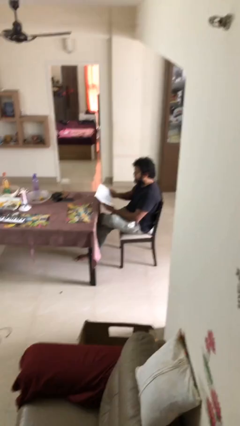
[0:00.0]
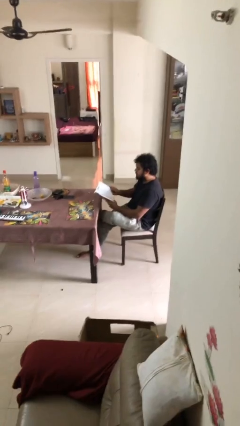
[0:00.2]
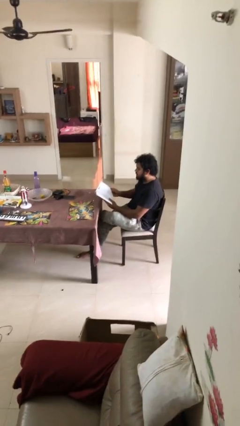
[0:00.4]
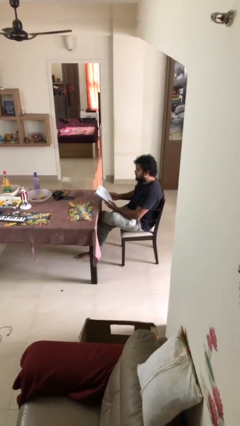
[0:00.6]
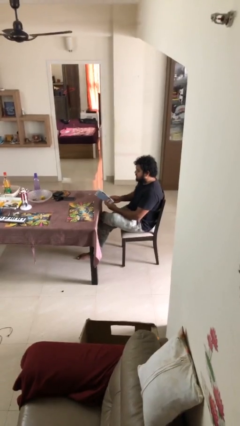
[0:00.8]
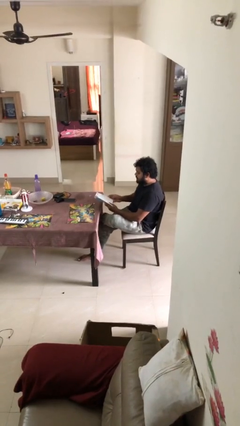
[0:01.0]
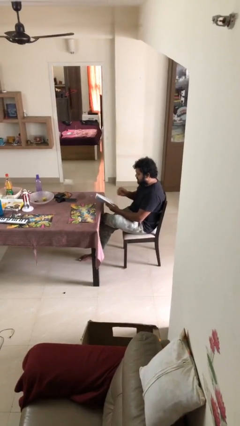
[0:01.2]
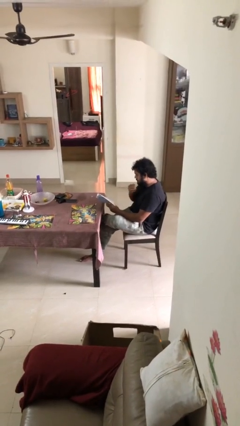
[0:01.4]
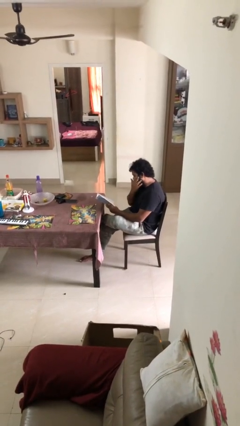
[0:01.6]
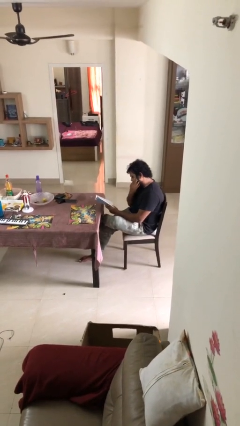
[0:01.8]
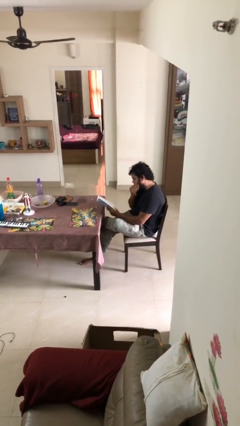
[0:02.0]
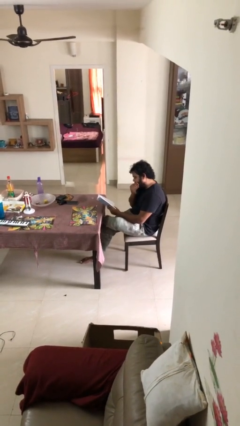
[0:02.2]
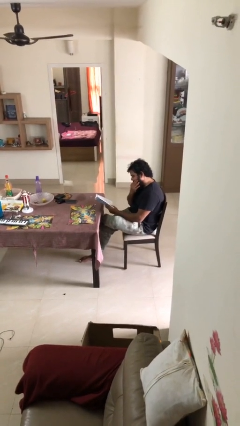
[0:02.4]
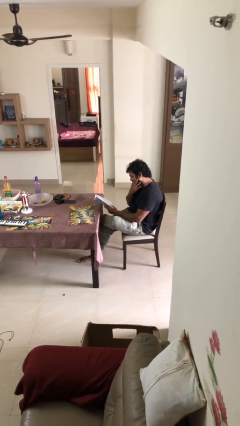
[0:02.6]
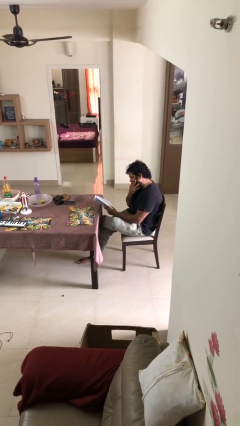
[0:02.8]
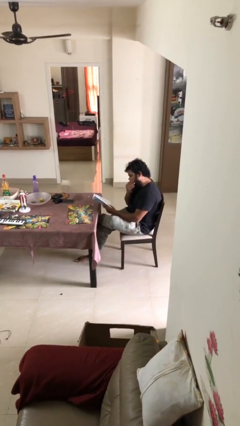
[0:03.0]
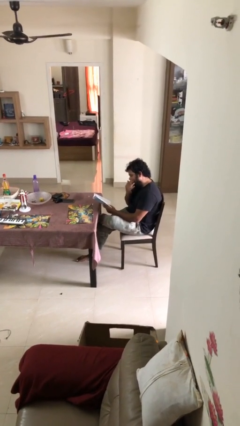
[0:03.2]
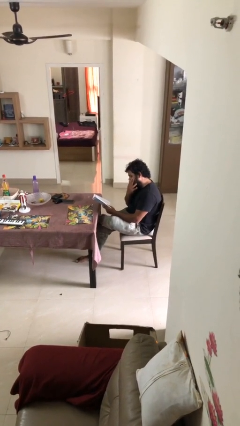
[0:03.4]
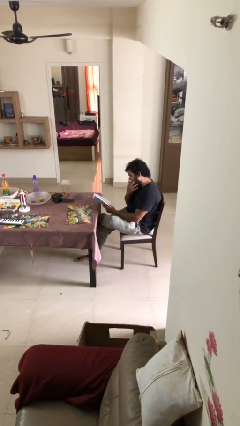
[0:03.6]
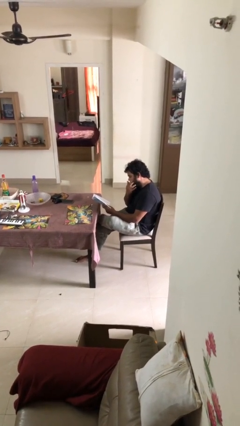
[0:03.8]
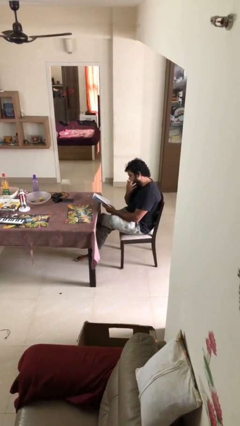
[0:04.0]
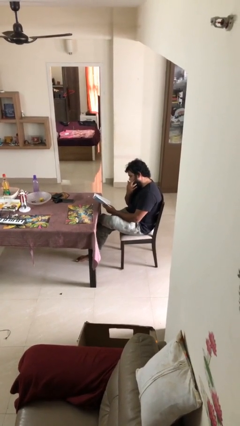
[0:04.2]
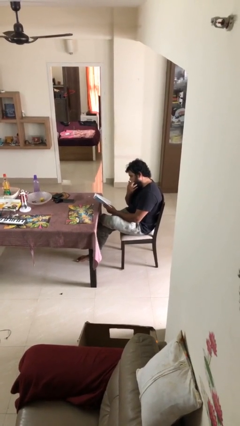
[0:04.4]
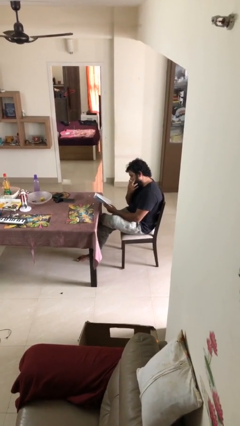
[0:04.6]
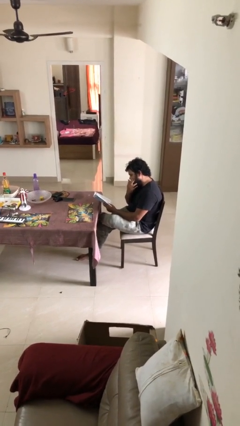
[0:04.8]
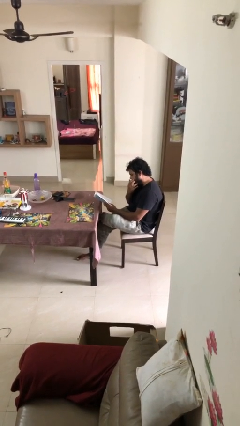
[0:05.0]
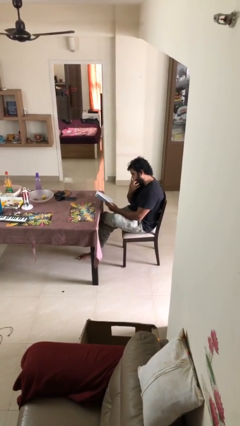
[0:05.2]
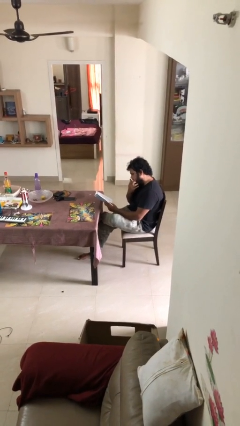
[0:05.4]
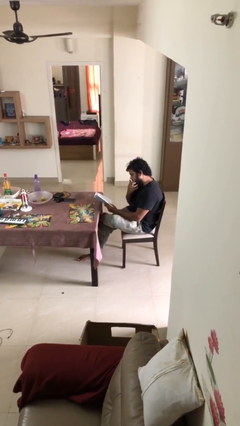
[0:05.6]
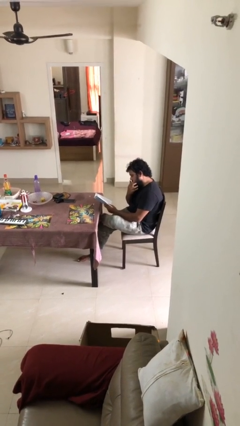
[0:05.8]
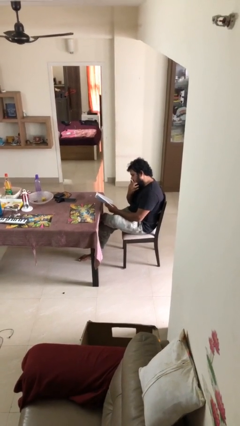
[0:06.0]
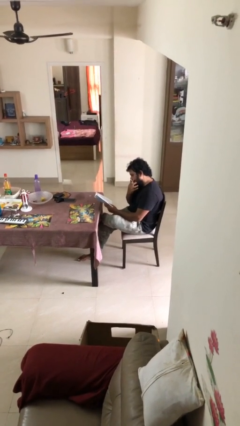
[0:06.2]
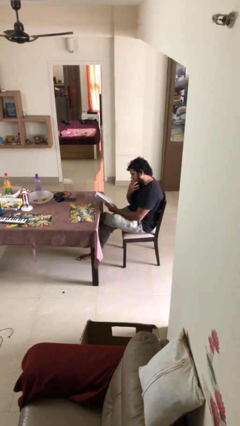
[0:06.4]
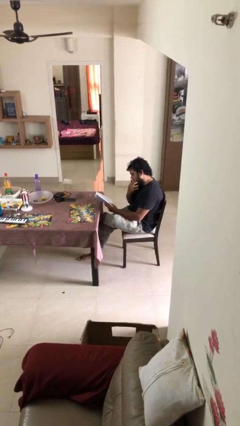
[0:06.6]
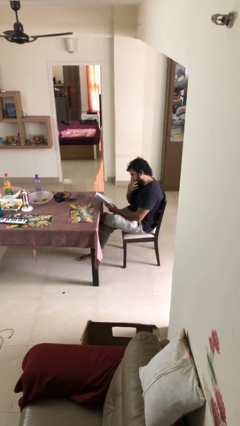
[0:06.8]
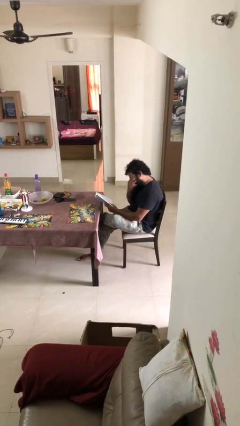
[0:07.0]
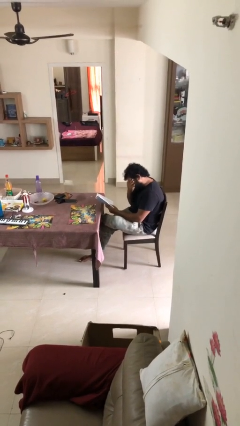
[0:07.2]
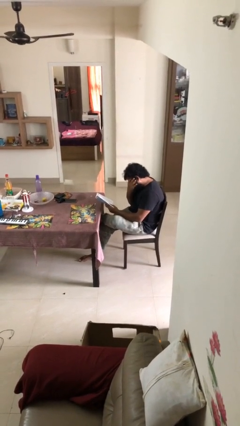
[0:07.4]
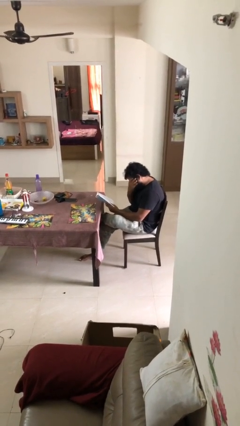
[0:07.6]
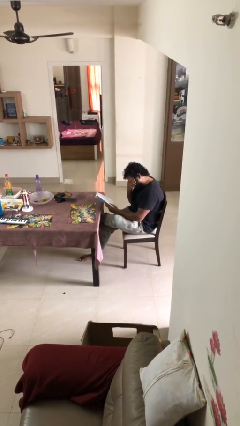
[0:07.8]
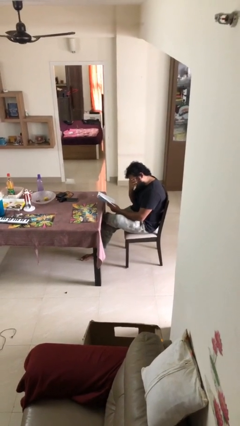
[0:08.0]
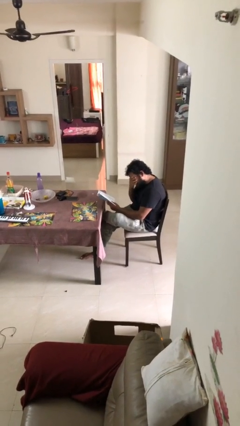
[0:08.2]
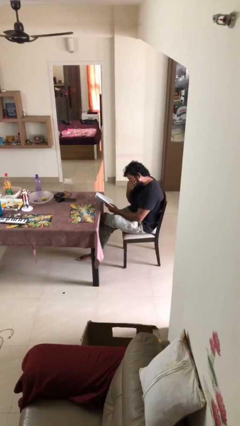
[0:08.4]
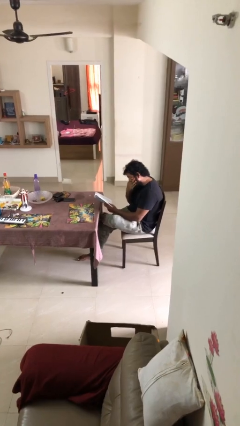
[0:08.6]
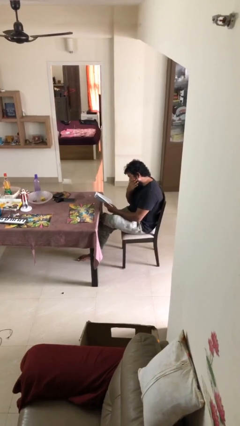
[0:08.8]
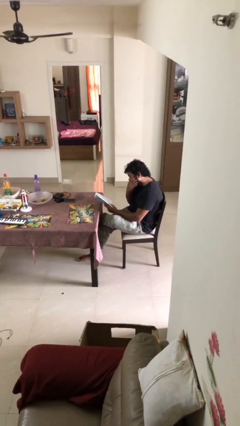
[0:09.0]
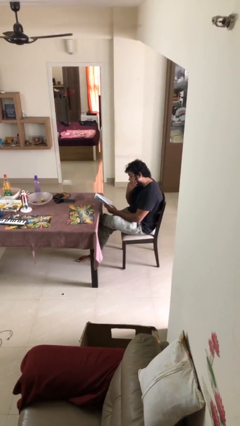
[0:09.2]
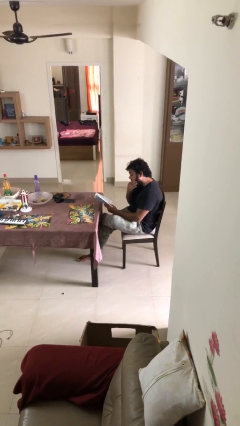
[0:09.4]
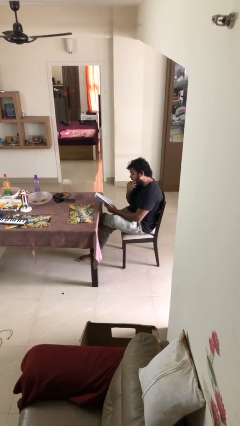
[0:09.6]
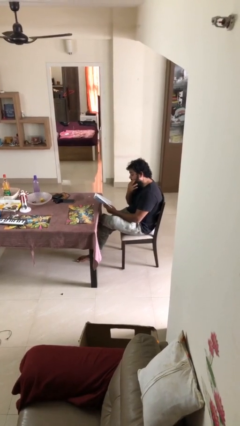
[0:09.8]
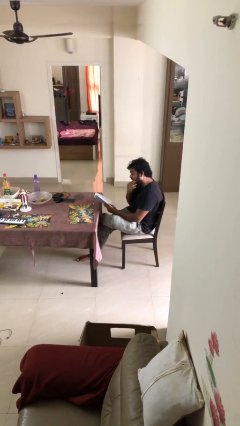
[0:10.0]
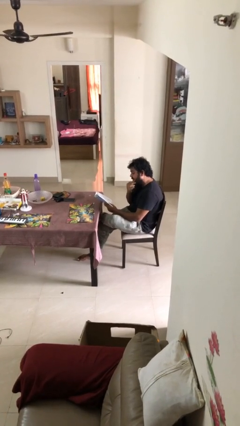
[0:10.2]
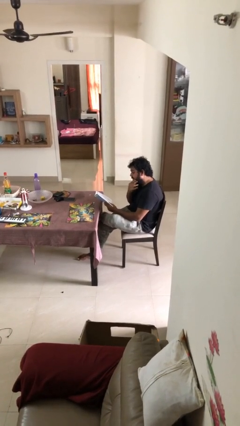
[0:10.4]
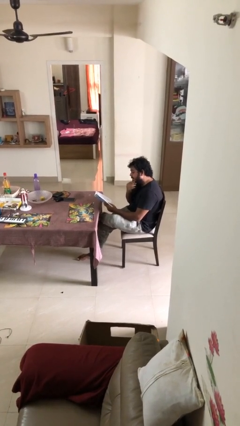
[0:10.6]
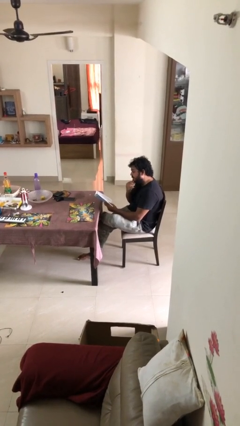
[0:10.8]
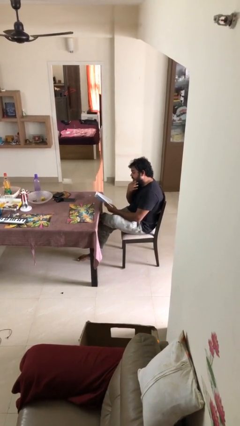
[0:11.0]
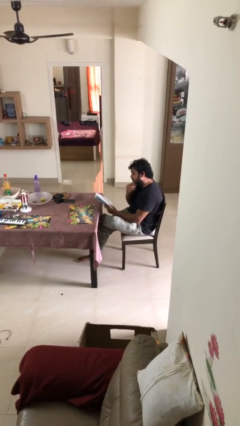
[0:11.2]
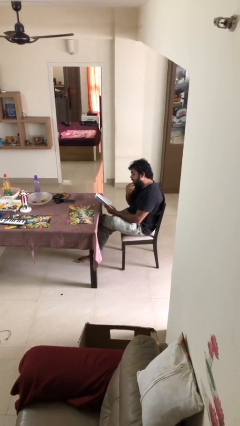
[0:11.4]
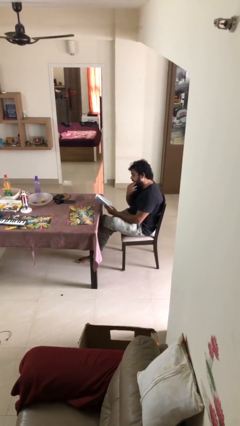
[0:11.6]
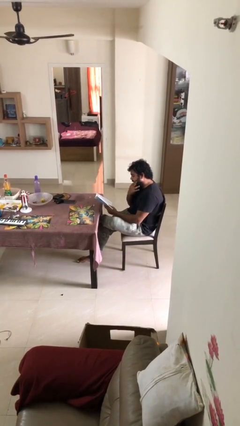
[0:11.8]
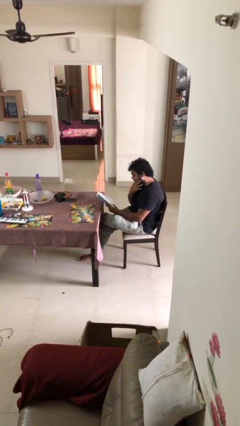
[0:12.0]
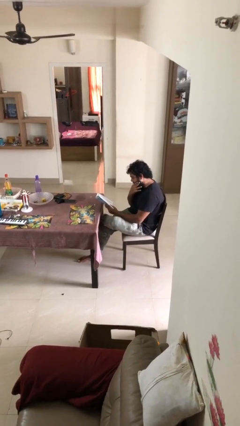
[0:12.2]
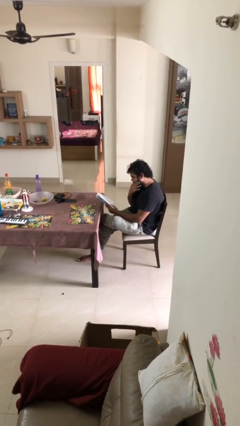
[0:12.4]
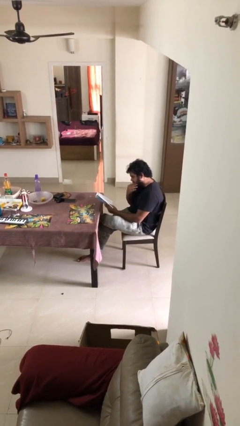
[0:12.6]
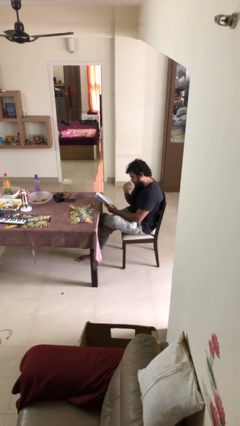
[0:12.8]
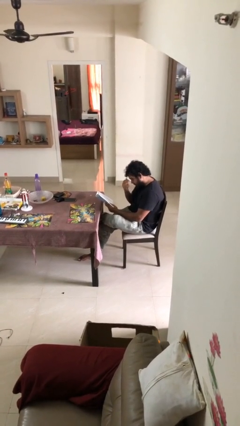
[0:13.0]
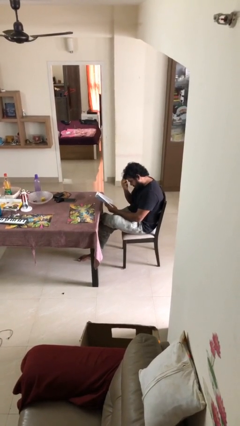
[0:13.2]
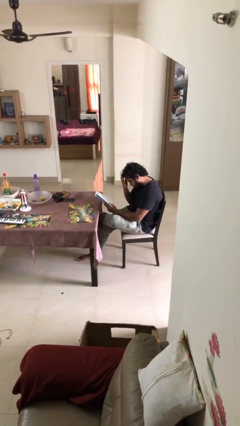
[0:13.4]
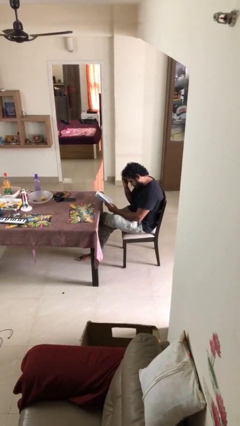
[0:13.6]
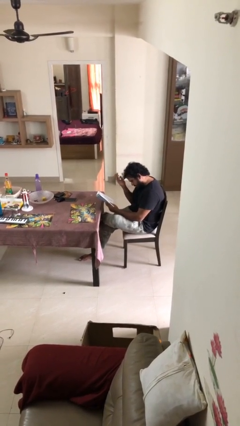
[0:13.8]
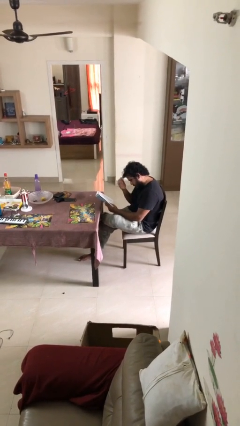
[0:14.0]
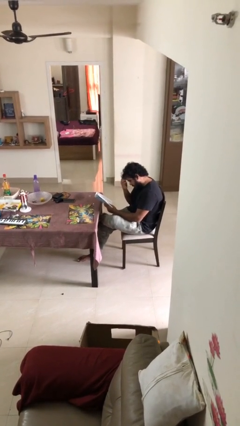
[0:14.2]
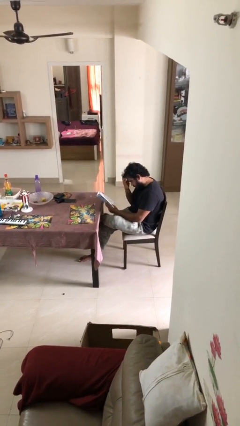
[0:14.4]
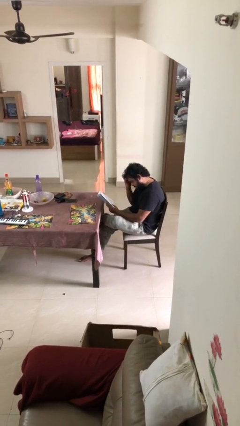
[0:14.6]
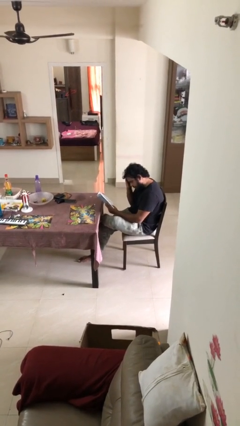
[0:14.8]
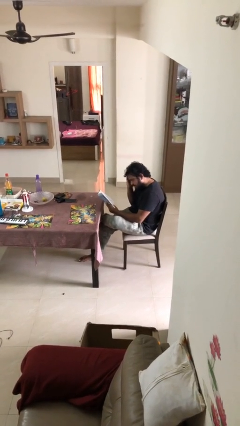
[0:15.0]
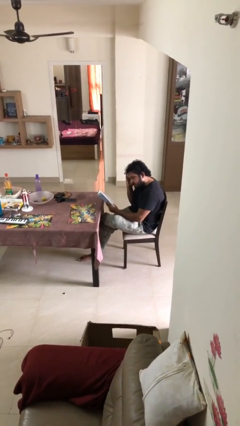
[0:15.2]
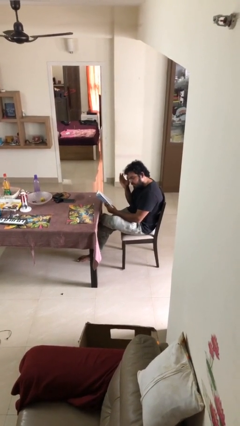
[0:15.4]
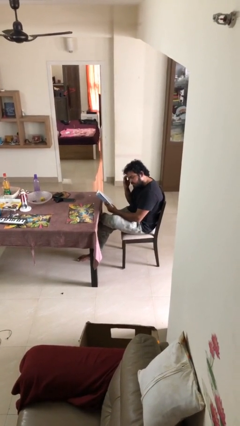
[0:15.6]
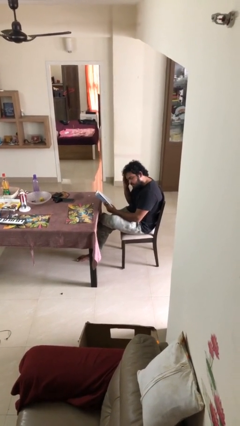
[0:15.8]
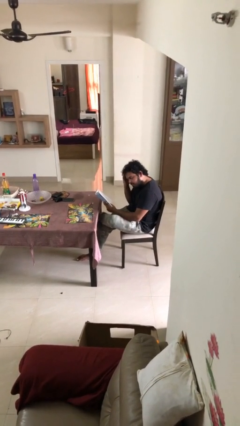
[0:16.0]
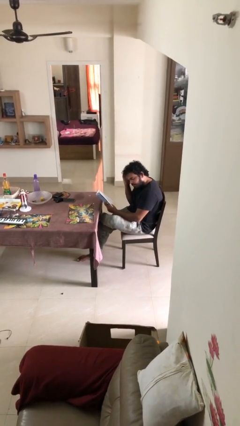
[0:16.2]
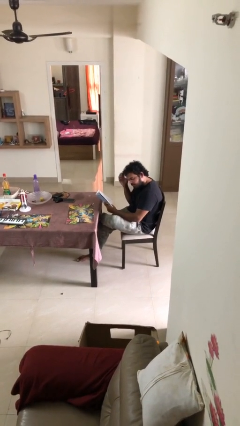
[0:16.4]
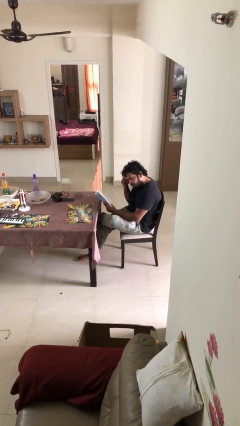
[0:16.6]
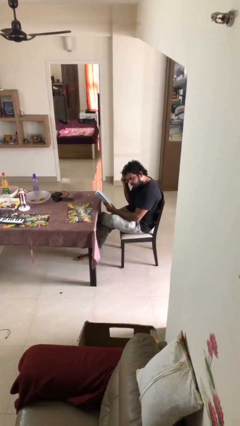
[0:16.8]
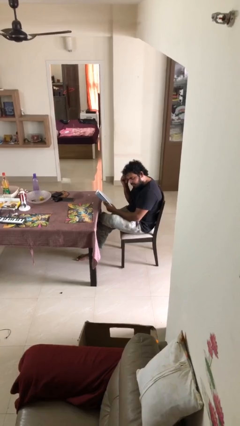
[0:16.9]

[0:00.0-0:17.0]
person reads document

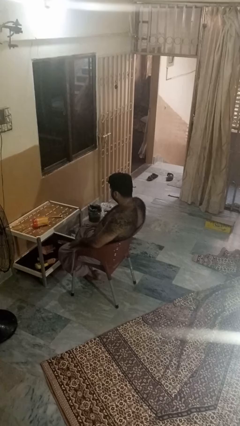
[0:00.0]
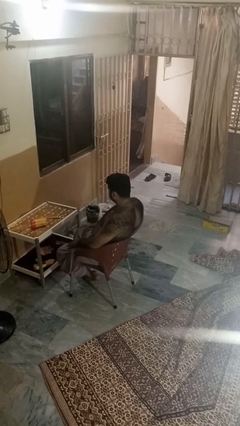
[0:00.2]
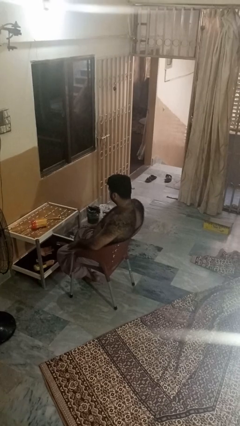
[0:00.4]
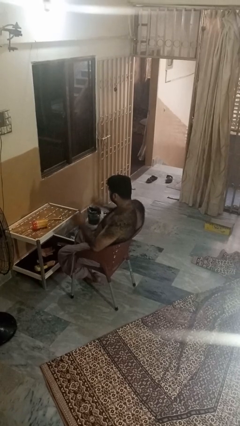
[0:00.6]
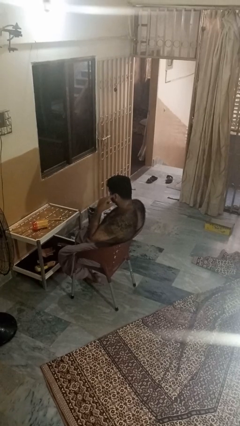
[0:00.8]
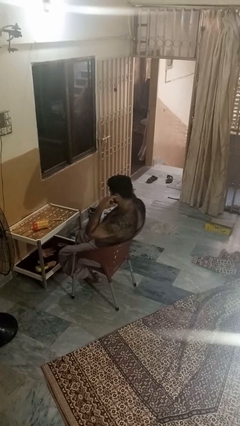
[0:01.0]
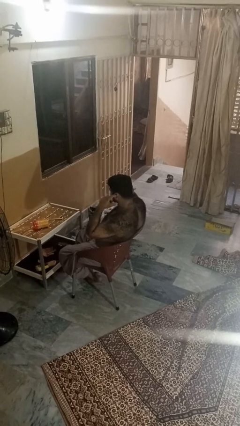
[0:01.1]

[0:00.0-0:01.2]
person puts fingers in ear

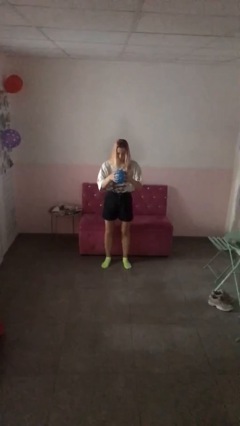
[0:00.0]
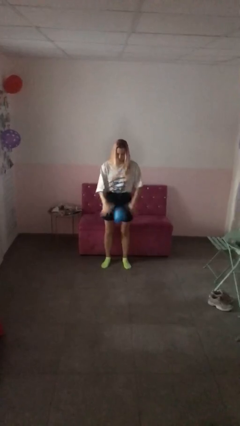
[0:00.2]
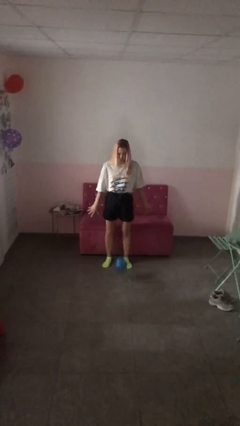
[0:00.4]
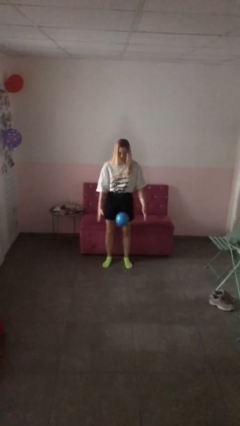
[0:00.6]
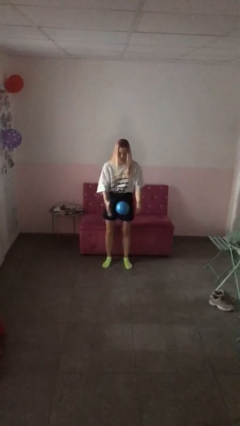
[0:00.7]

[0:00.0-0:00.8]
person bounces ball on floor
